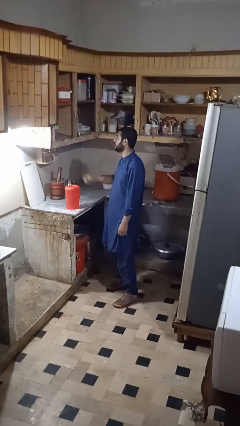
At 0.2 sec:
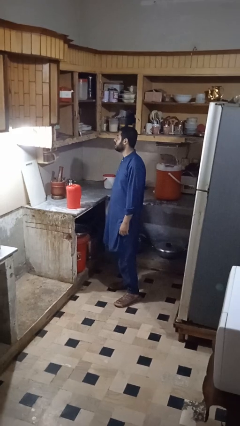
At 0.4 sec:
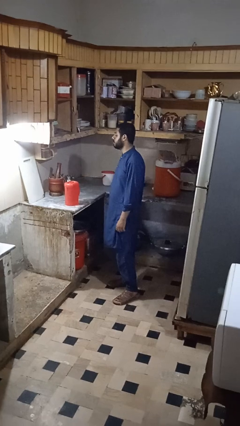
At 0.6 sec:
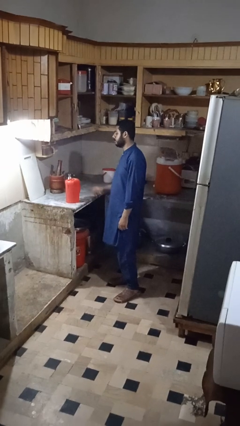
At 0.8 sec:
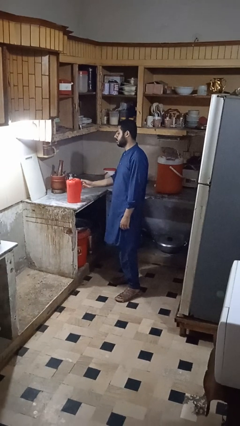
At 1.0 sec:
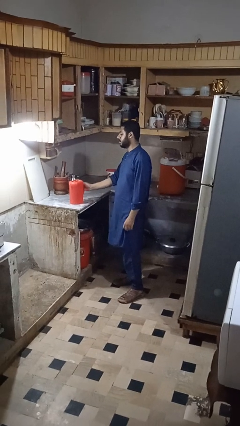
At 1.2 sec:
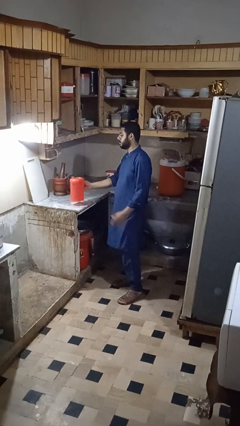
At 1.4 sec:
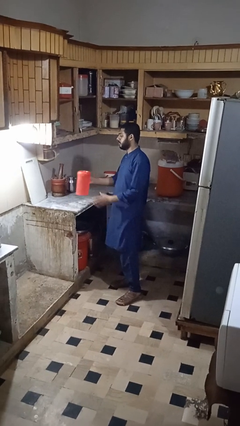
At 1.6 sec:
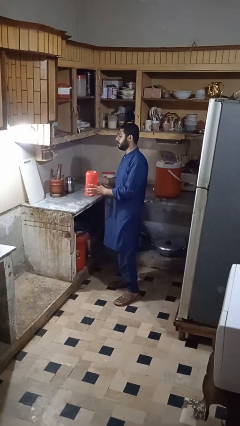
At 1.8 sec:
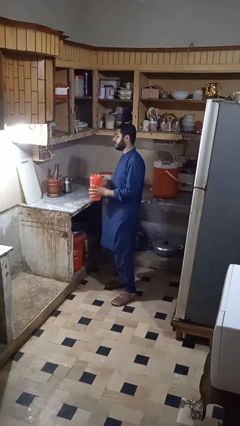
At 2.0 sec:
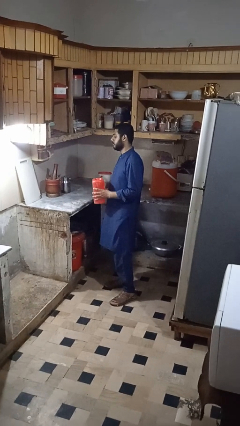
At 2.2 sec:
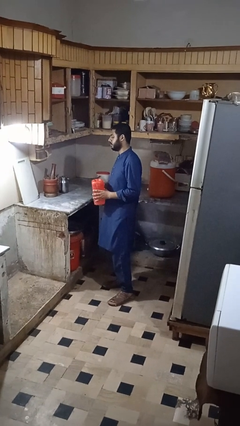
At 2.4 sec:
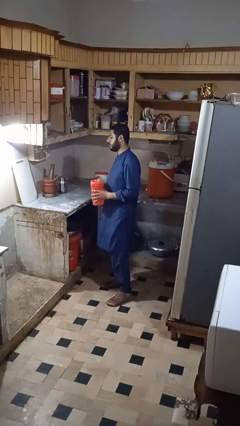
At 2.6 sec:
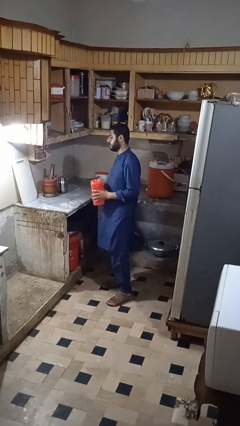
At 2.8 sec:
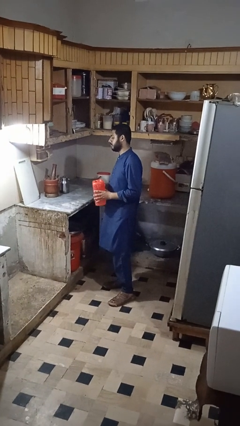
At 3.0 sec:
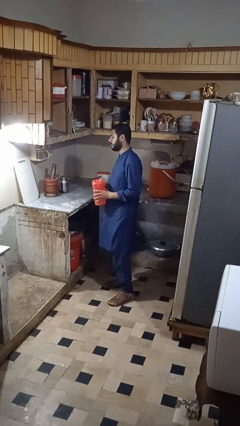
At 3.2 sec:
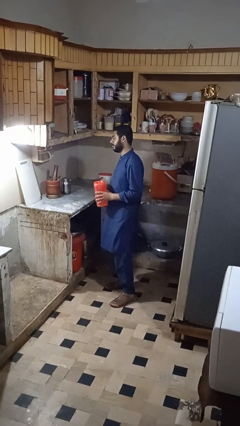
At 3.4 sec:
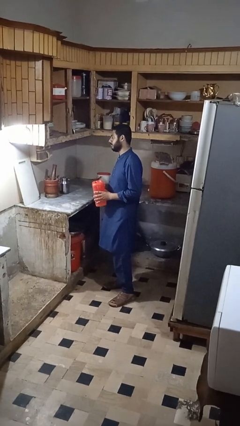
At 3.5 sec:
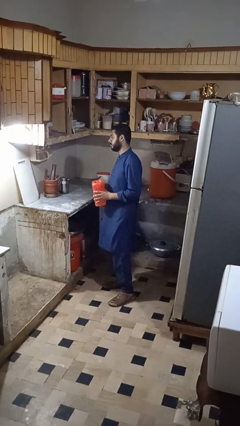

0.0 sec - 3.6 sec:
person picks up object from countertop

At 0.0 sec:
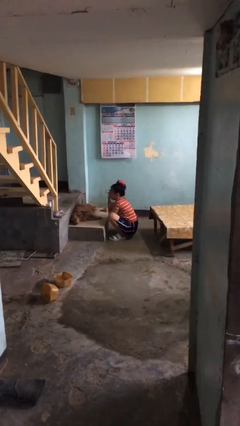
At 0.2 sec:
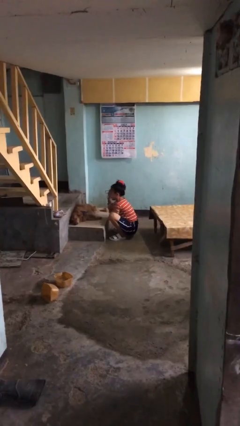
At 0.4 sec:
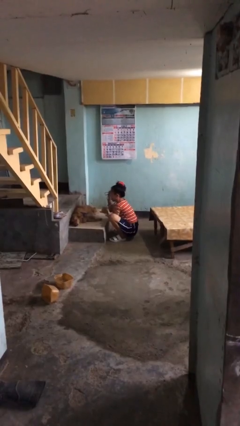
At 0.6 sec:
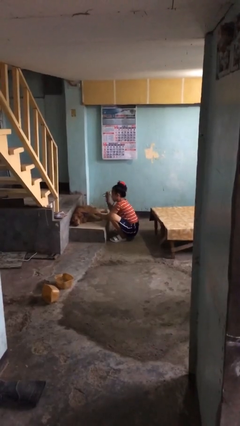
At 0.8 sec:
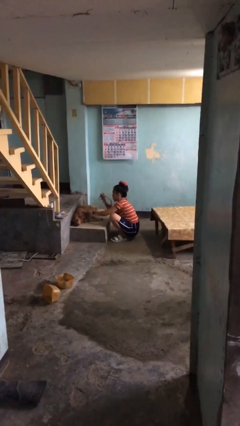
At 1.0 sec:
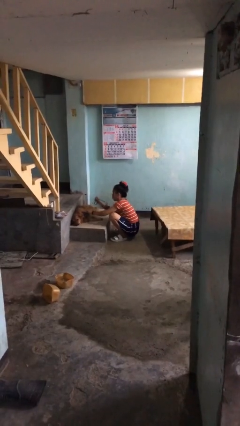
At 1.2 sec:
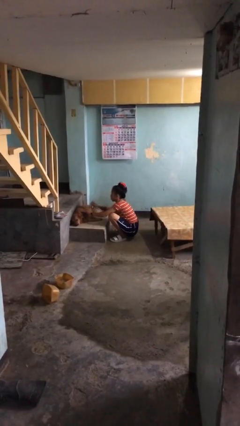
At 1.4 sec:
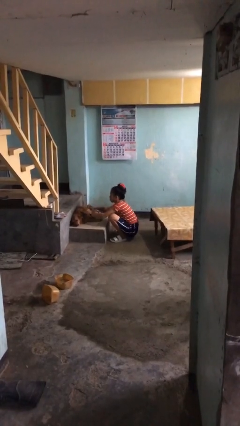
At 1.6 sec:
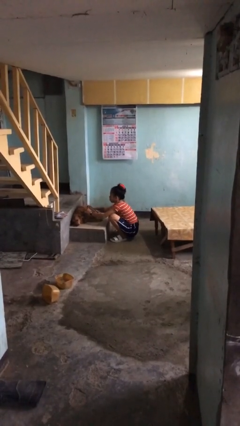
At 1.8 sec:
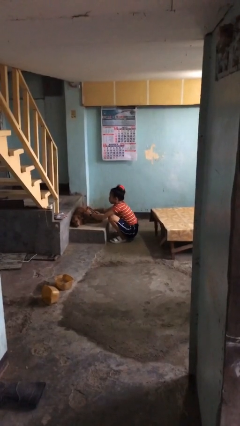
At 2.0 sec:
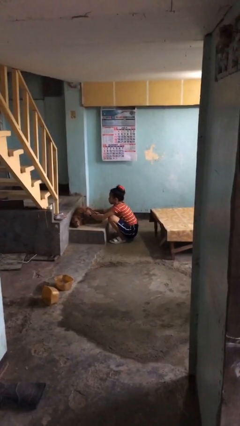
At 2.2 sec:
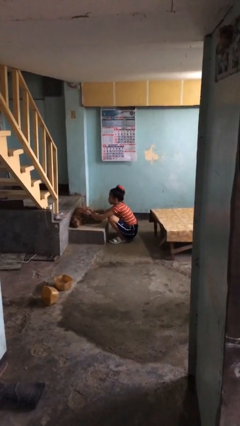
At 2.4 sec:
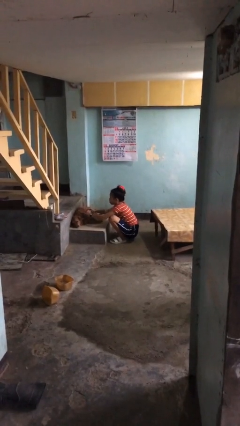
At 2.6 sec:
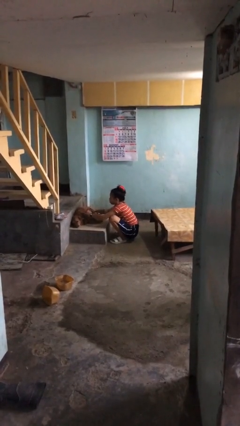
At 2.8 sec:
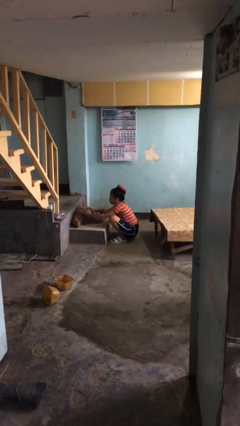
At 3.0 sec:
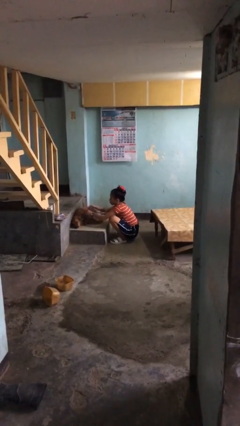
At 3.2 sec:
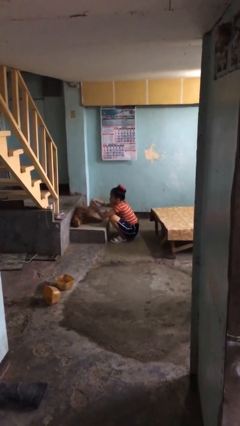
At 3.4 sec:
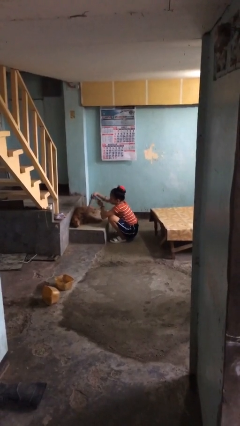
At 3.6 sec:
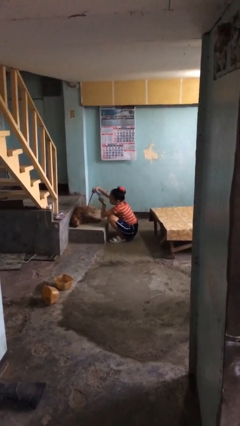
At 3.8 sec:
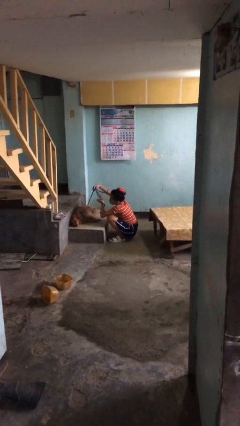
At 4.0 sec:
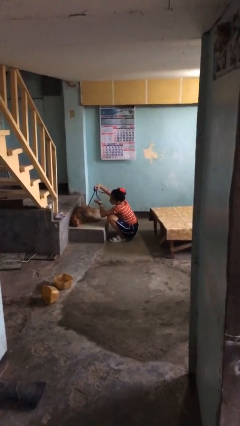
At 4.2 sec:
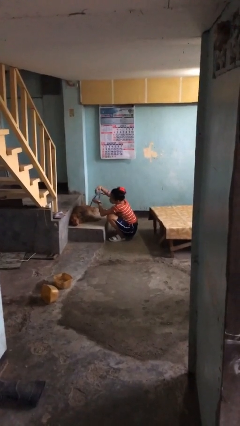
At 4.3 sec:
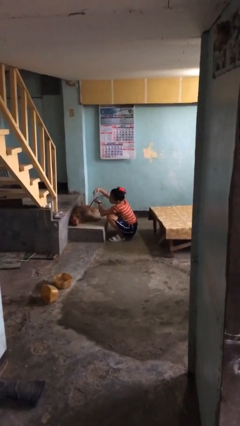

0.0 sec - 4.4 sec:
person attaches leash to dog

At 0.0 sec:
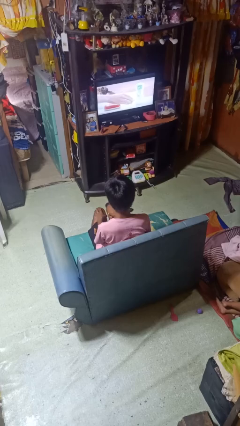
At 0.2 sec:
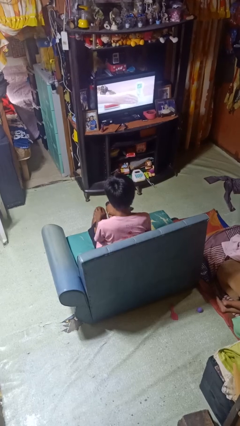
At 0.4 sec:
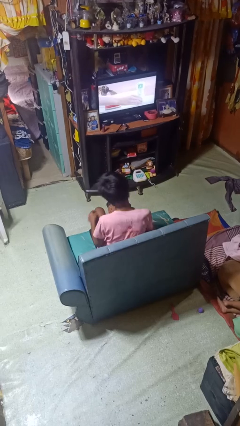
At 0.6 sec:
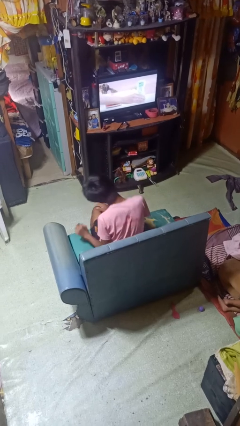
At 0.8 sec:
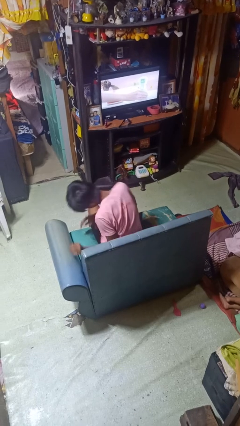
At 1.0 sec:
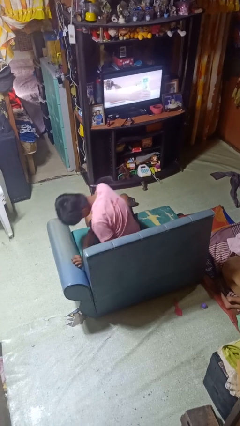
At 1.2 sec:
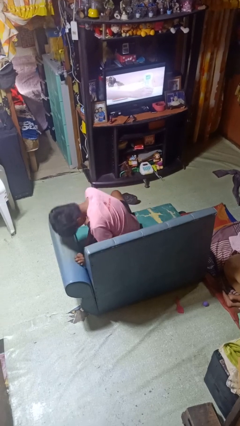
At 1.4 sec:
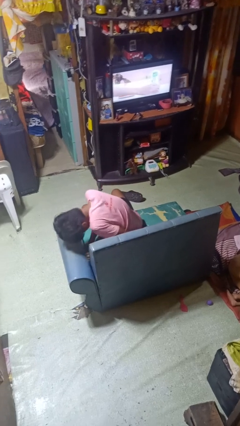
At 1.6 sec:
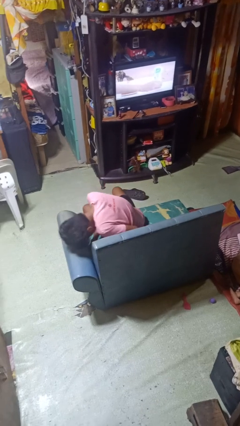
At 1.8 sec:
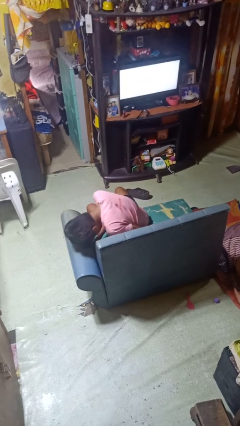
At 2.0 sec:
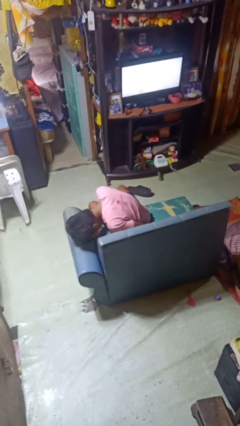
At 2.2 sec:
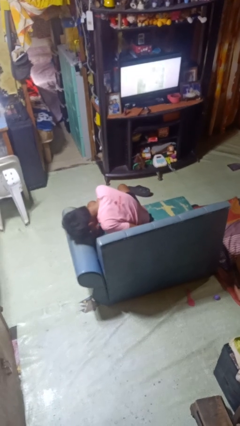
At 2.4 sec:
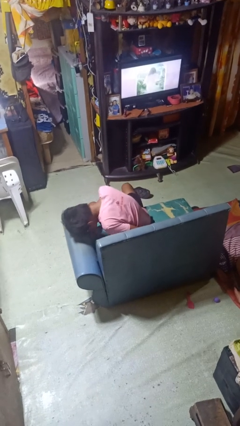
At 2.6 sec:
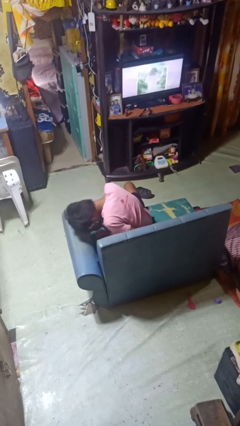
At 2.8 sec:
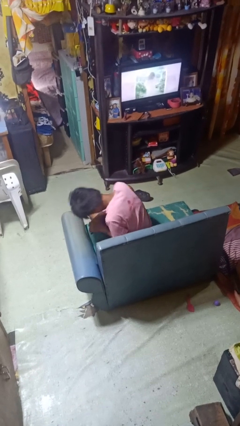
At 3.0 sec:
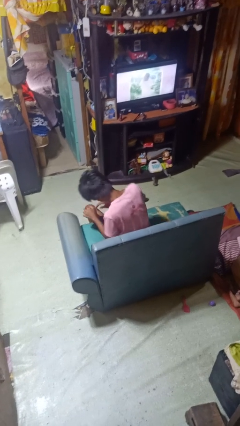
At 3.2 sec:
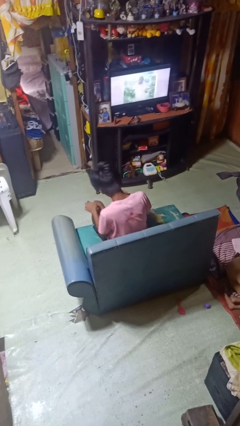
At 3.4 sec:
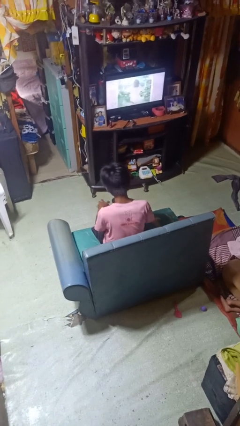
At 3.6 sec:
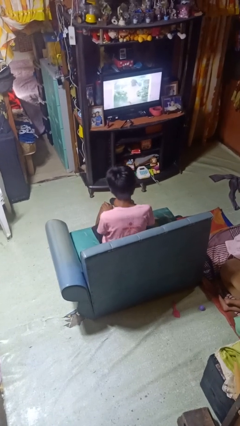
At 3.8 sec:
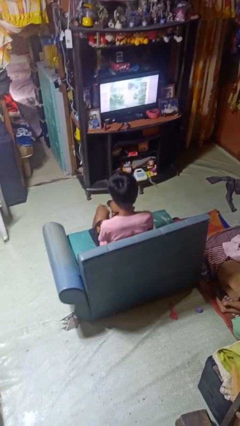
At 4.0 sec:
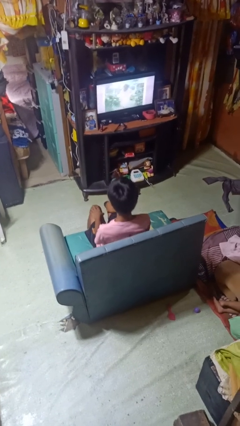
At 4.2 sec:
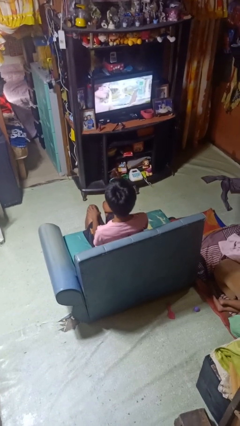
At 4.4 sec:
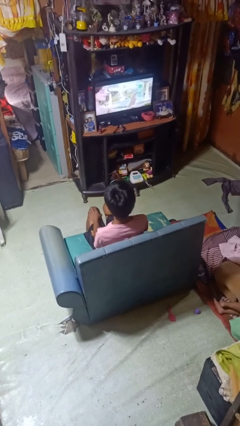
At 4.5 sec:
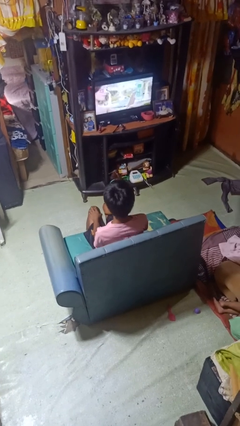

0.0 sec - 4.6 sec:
person searches in couch

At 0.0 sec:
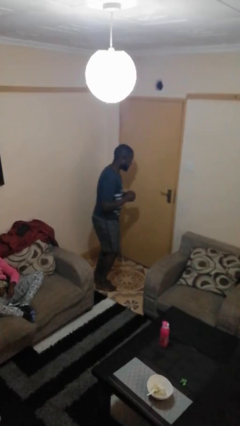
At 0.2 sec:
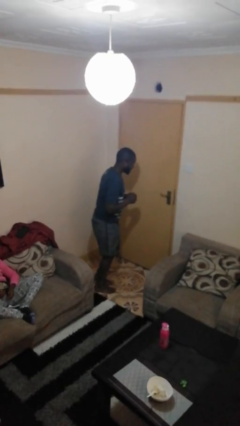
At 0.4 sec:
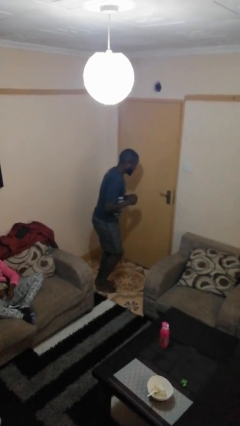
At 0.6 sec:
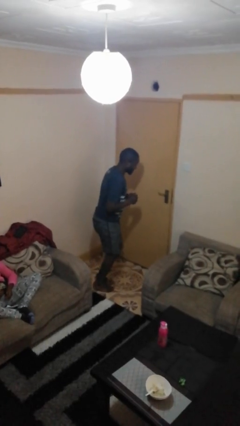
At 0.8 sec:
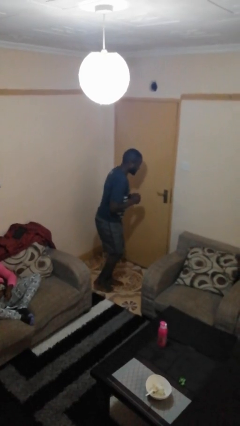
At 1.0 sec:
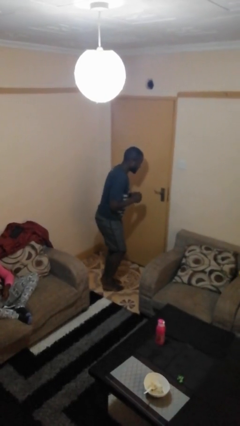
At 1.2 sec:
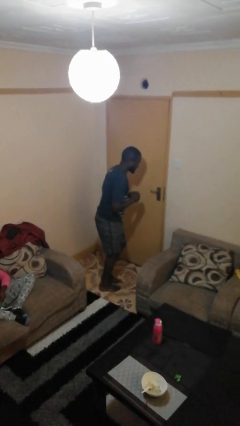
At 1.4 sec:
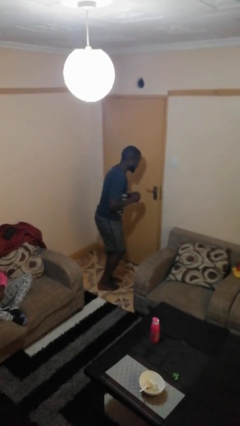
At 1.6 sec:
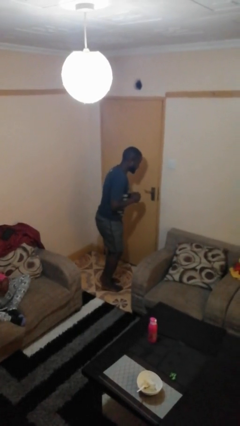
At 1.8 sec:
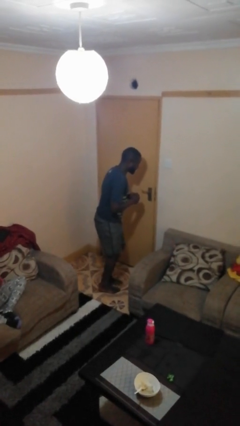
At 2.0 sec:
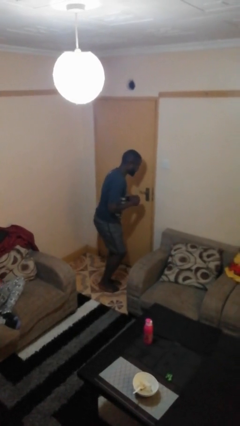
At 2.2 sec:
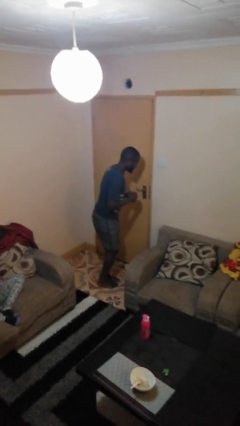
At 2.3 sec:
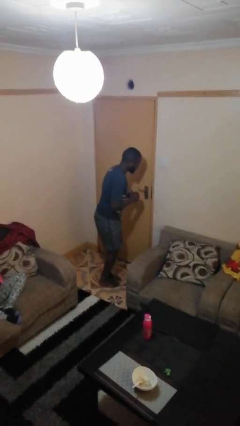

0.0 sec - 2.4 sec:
person walks tiptoe

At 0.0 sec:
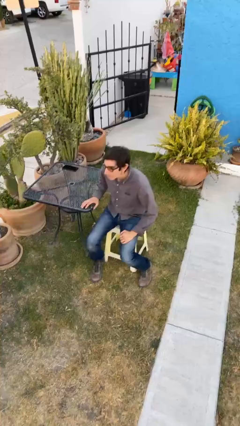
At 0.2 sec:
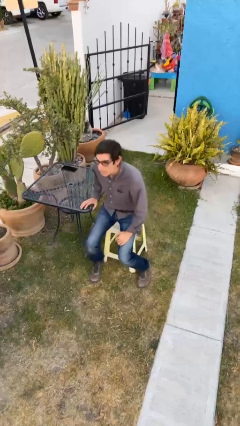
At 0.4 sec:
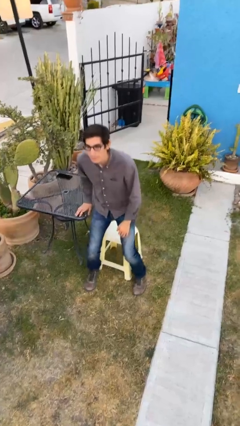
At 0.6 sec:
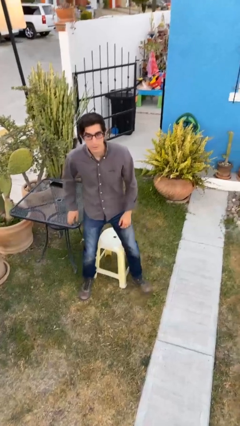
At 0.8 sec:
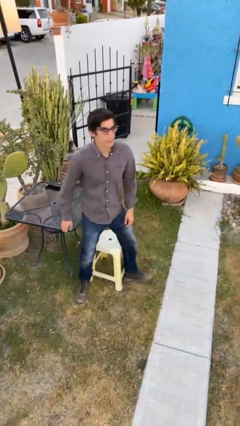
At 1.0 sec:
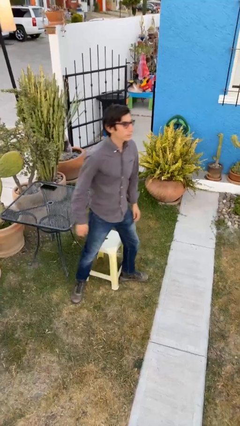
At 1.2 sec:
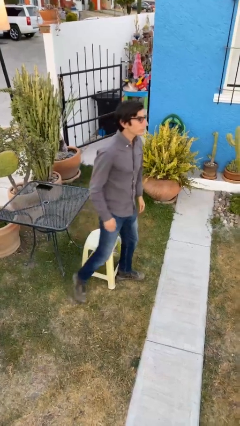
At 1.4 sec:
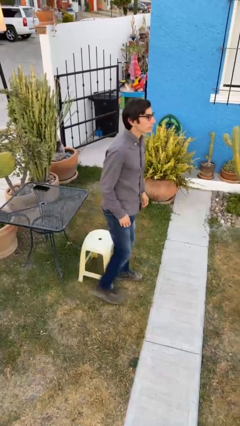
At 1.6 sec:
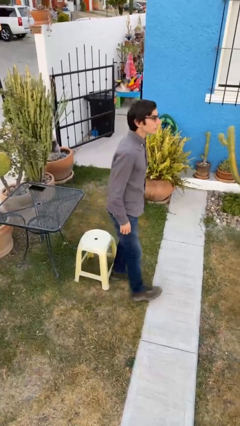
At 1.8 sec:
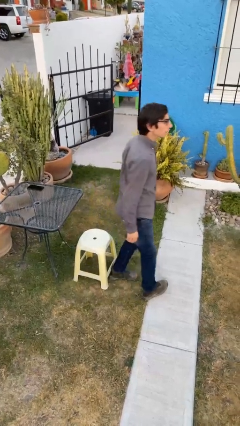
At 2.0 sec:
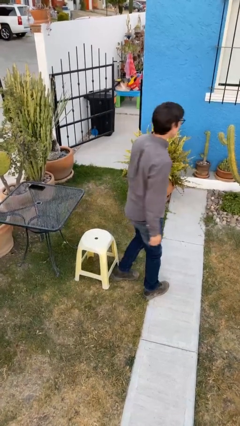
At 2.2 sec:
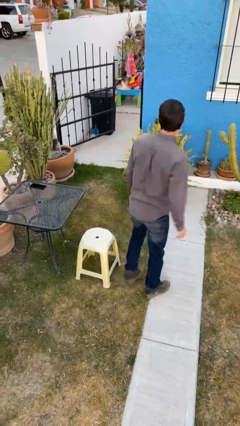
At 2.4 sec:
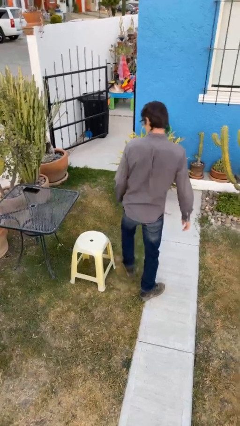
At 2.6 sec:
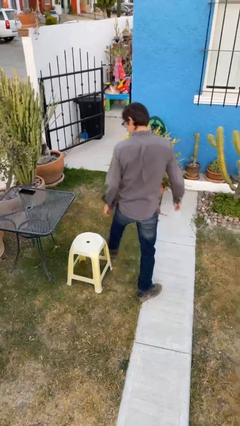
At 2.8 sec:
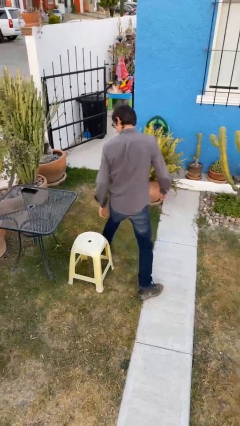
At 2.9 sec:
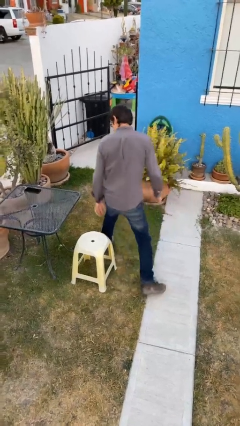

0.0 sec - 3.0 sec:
person stands up
